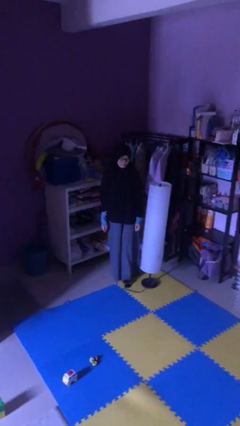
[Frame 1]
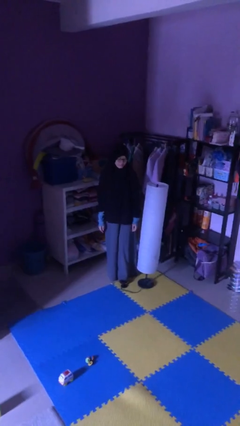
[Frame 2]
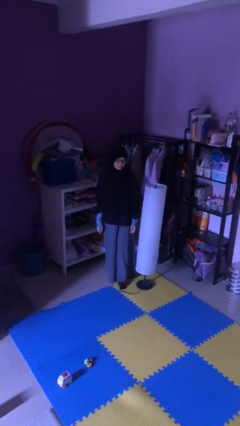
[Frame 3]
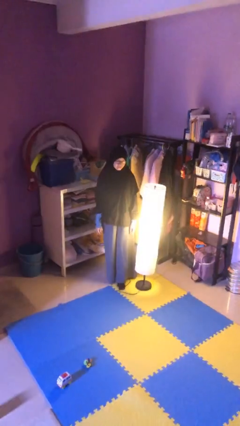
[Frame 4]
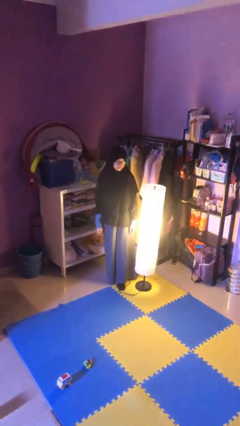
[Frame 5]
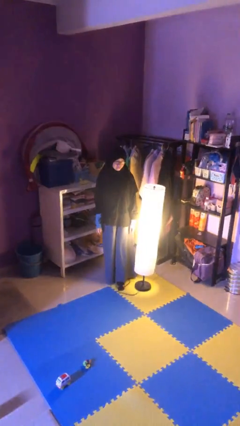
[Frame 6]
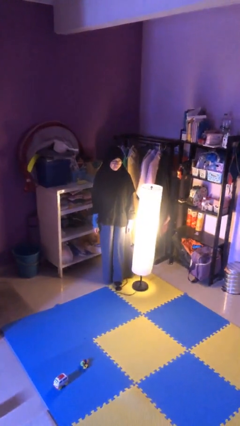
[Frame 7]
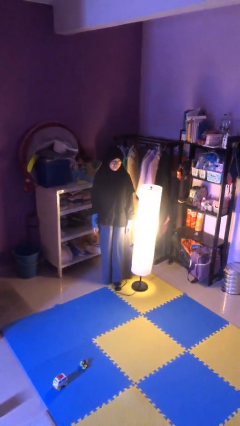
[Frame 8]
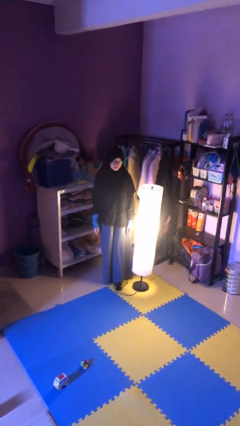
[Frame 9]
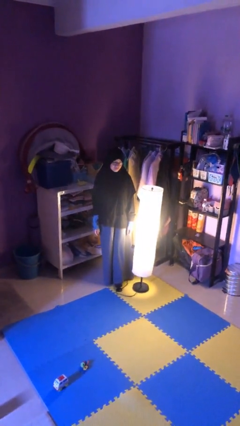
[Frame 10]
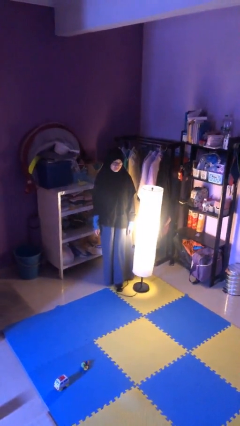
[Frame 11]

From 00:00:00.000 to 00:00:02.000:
person turns on lamp

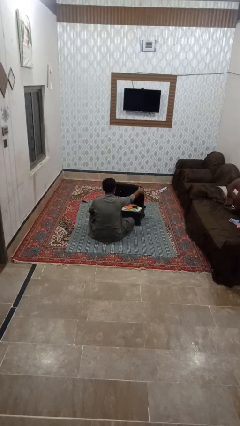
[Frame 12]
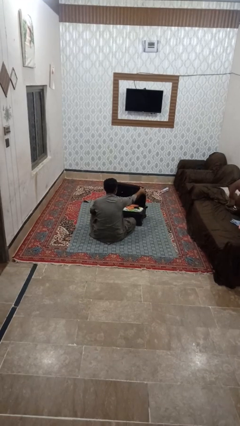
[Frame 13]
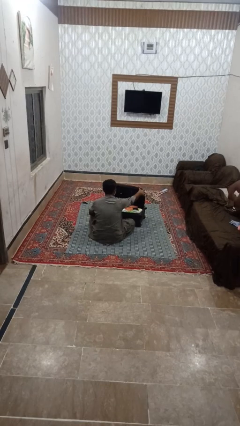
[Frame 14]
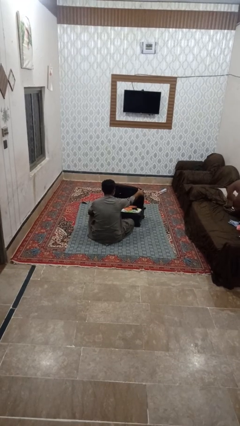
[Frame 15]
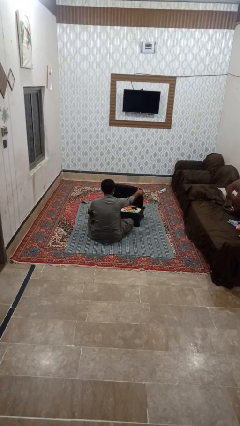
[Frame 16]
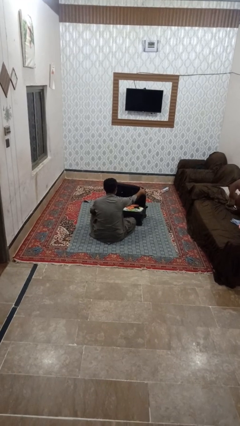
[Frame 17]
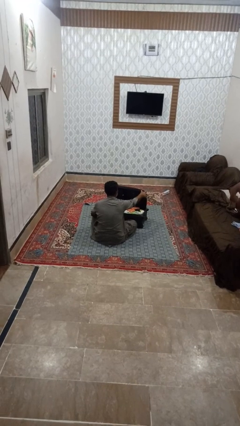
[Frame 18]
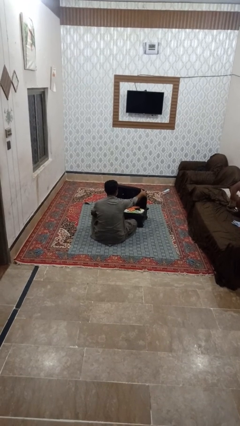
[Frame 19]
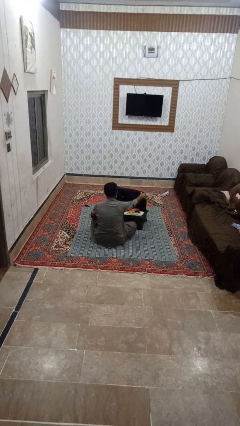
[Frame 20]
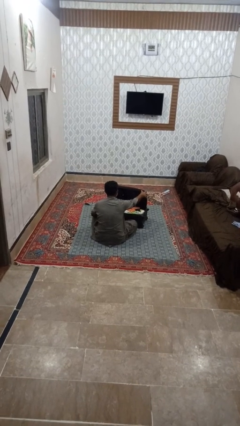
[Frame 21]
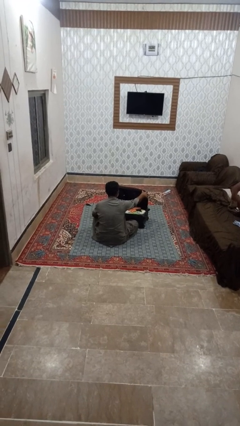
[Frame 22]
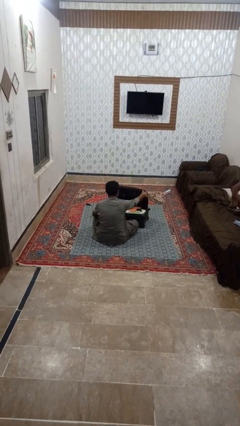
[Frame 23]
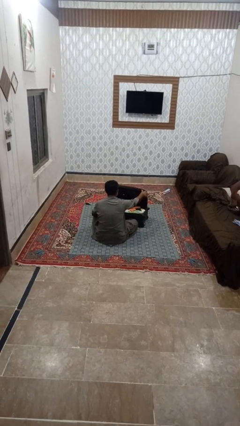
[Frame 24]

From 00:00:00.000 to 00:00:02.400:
person opens suitcase

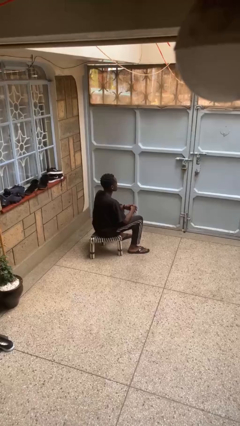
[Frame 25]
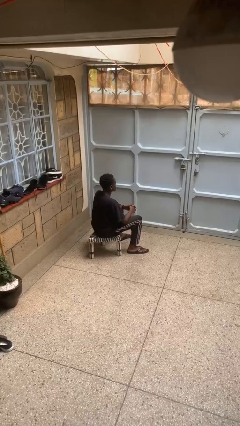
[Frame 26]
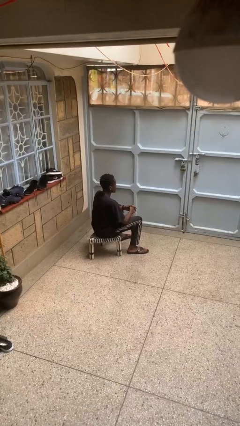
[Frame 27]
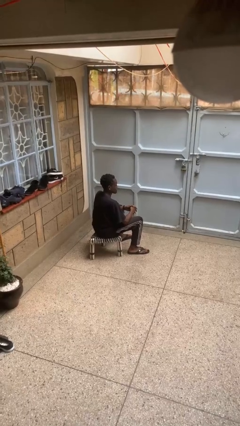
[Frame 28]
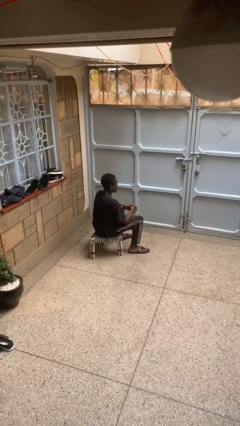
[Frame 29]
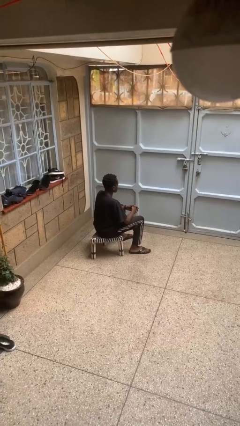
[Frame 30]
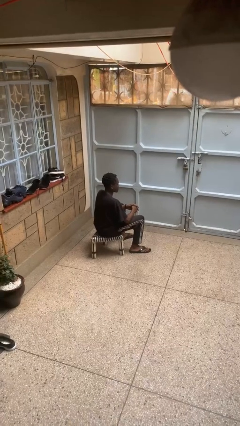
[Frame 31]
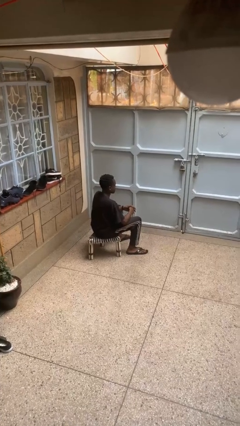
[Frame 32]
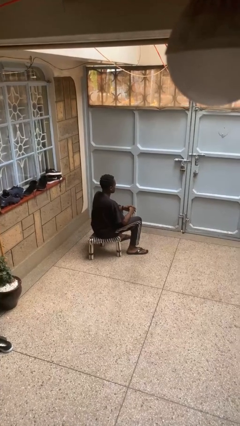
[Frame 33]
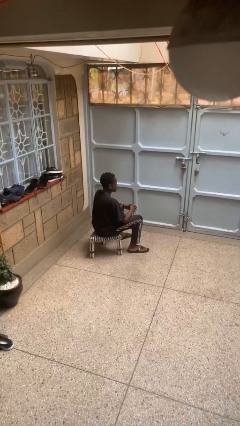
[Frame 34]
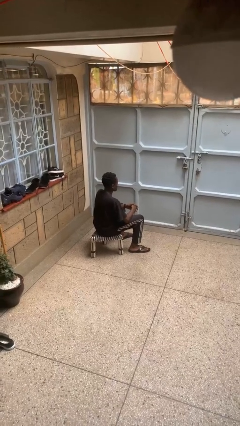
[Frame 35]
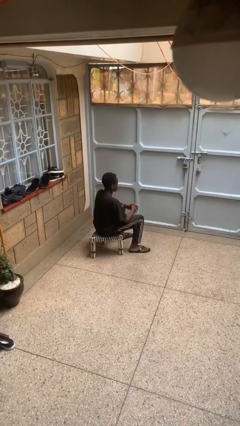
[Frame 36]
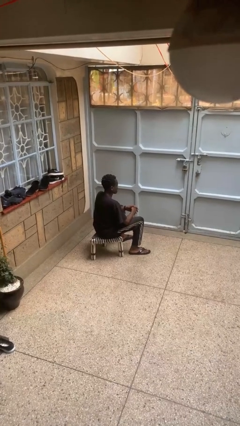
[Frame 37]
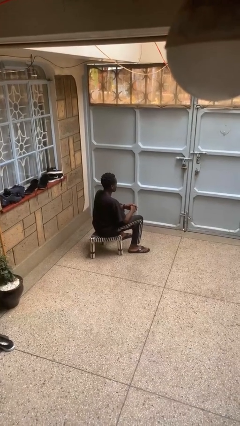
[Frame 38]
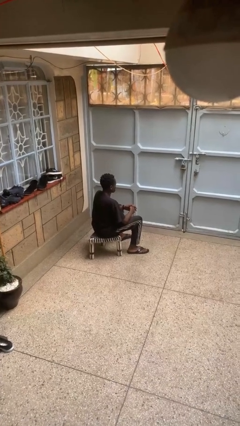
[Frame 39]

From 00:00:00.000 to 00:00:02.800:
person shakes head

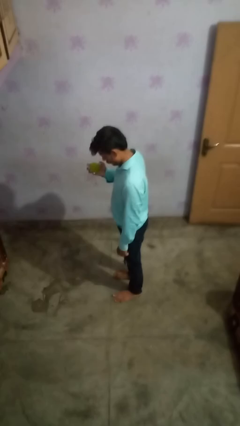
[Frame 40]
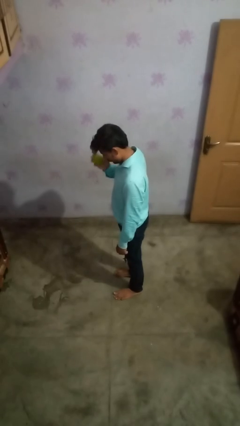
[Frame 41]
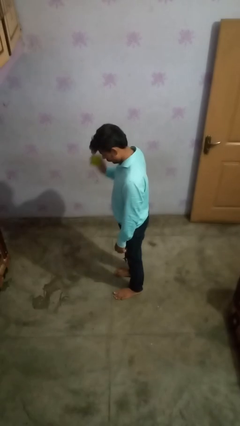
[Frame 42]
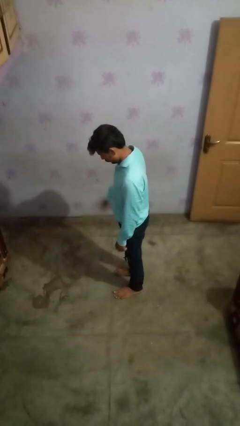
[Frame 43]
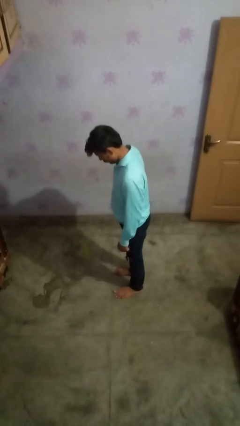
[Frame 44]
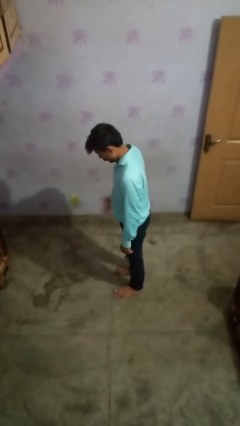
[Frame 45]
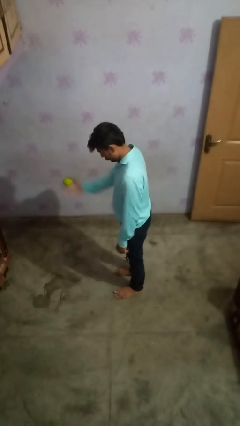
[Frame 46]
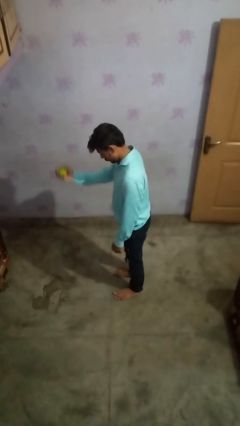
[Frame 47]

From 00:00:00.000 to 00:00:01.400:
person bounces ball on floor

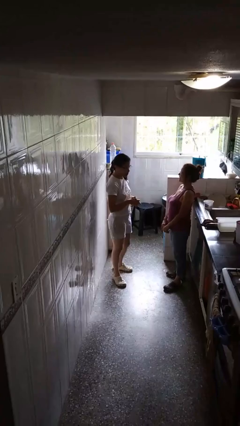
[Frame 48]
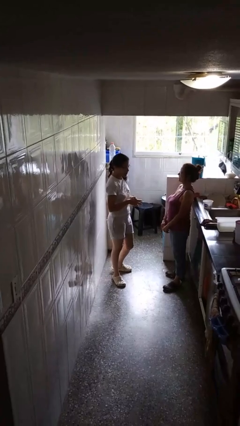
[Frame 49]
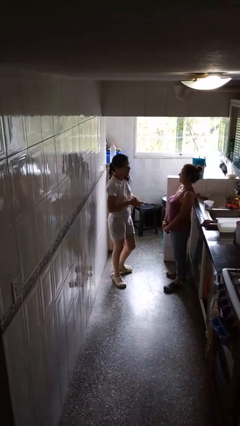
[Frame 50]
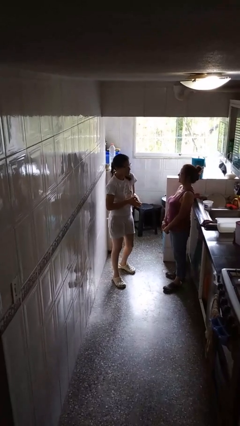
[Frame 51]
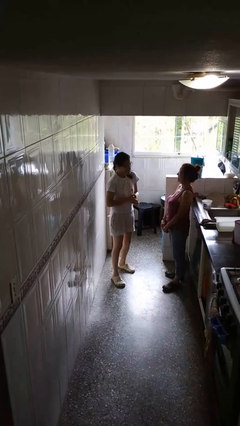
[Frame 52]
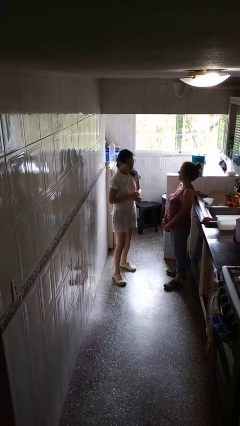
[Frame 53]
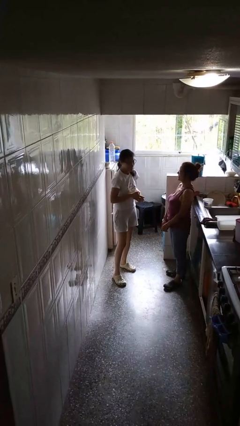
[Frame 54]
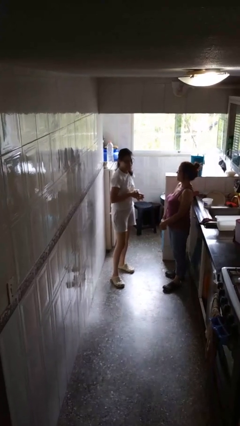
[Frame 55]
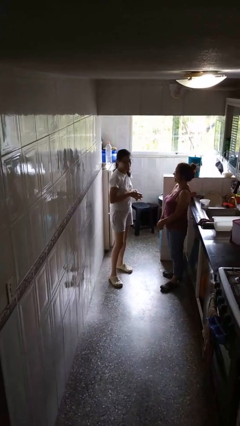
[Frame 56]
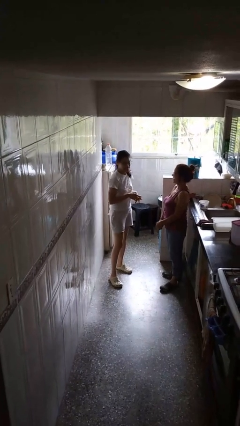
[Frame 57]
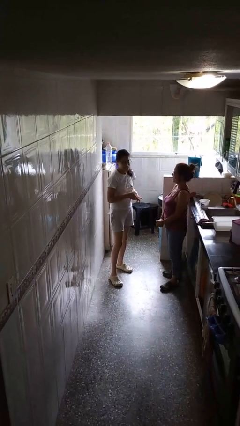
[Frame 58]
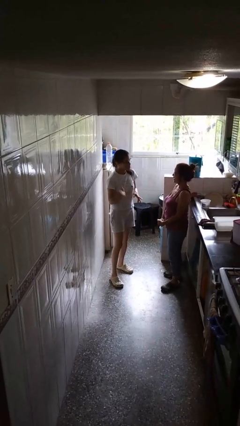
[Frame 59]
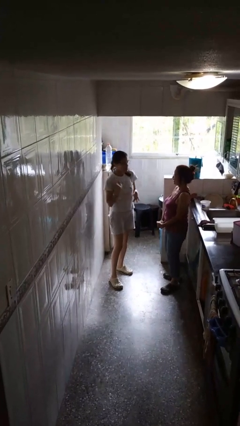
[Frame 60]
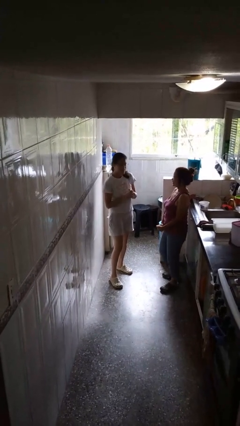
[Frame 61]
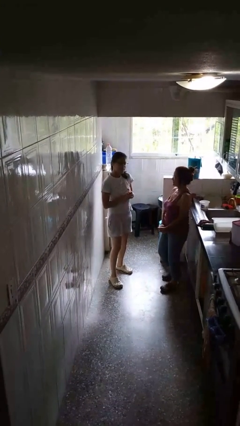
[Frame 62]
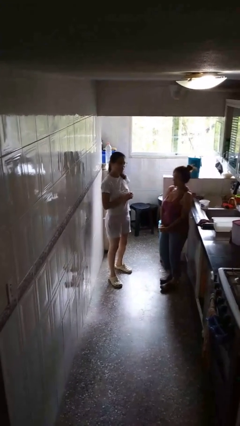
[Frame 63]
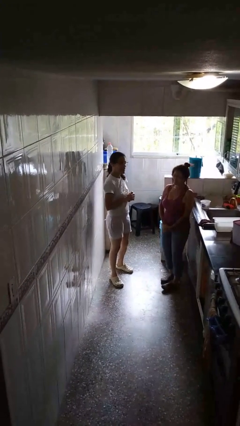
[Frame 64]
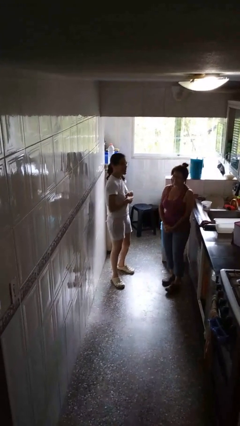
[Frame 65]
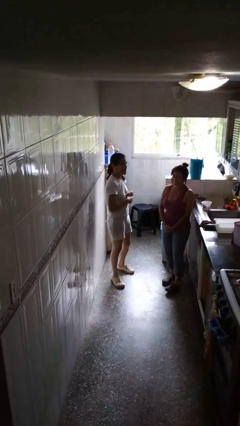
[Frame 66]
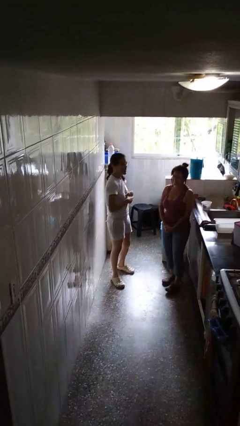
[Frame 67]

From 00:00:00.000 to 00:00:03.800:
person laughs with person

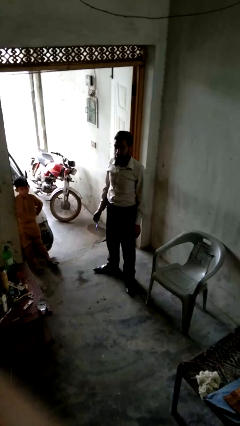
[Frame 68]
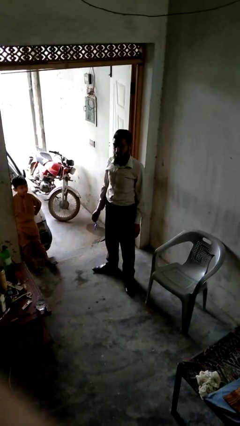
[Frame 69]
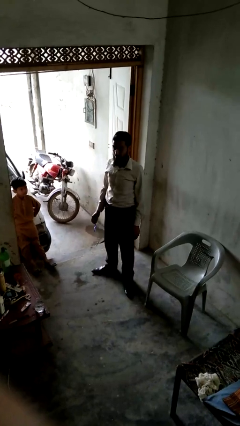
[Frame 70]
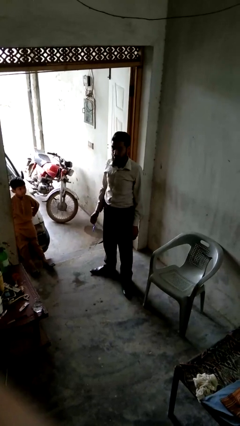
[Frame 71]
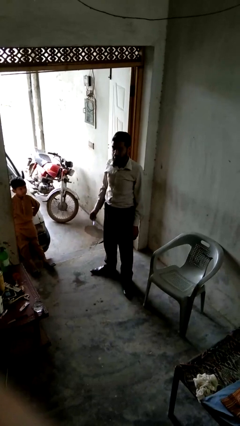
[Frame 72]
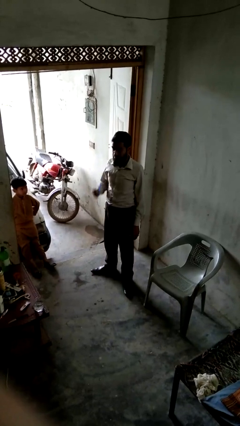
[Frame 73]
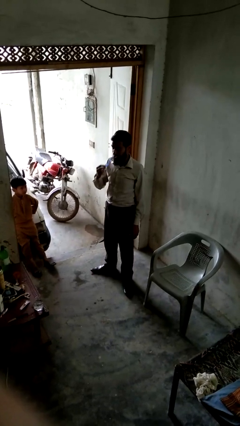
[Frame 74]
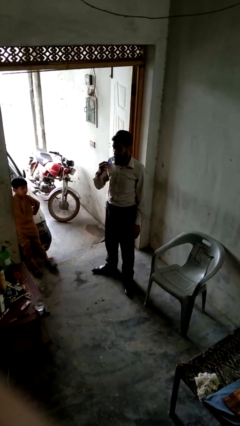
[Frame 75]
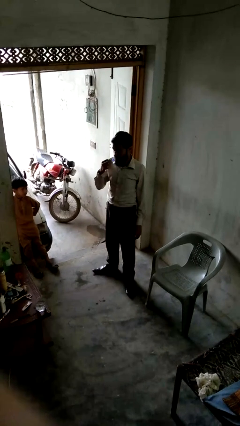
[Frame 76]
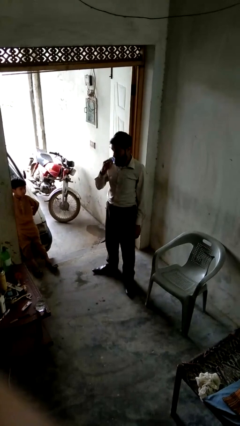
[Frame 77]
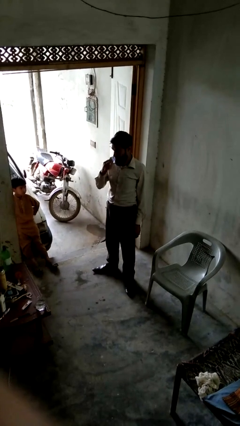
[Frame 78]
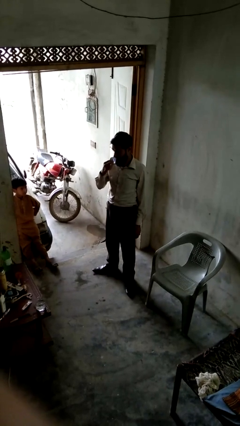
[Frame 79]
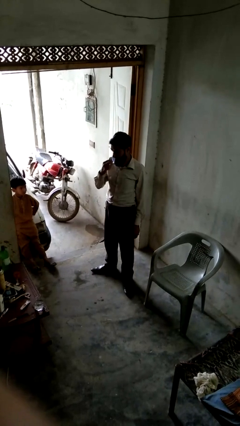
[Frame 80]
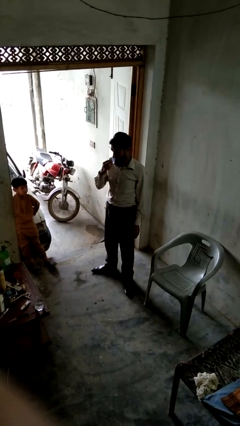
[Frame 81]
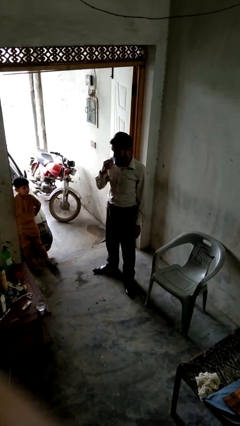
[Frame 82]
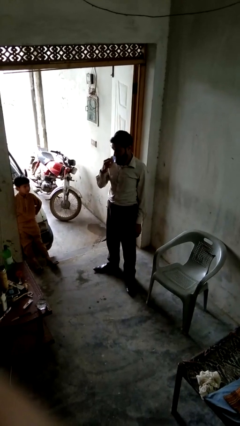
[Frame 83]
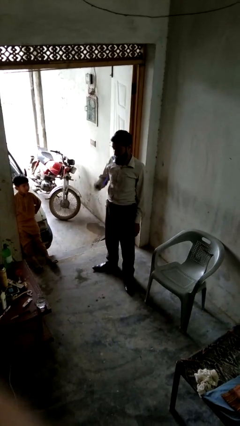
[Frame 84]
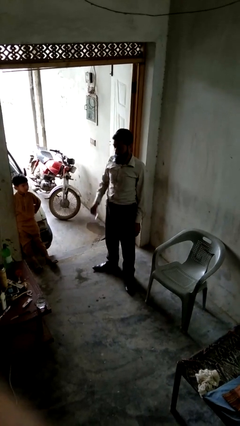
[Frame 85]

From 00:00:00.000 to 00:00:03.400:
person brushes teeth
